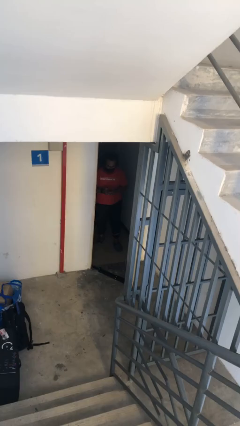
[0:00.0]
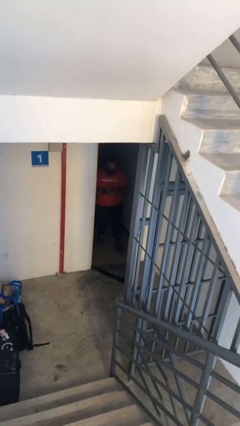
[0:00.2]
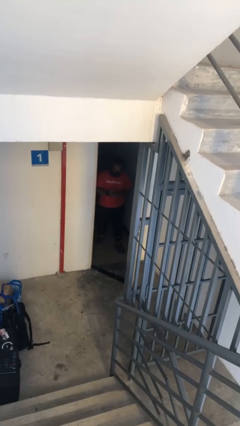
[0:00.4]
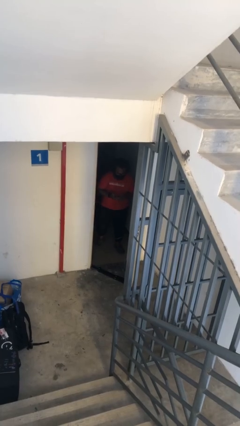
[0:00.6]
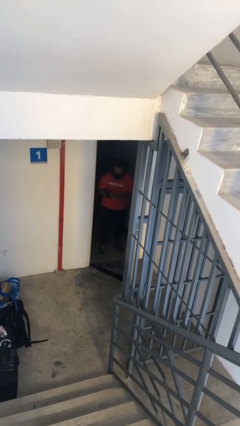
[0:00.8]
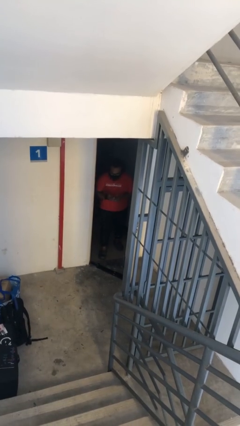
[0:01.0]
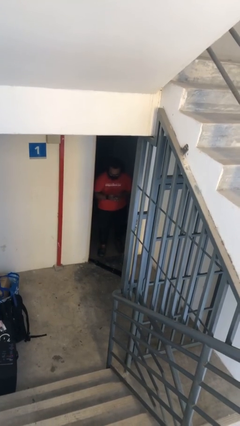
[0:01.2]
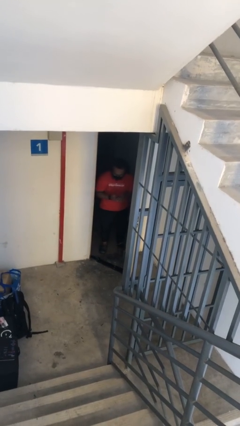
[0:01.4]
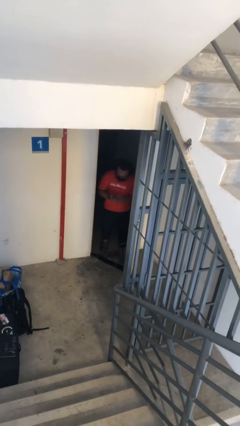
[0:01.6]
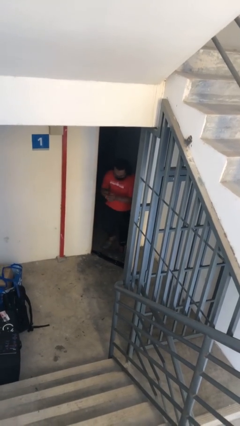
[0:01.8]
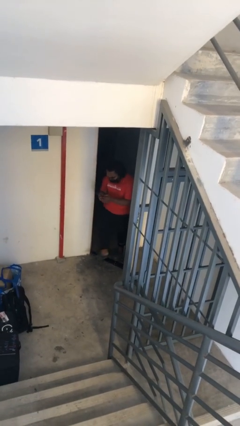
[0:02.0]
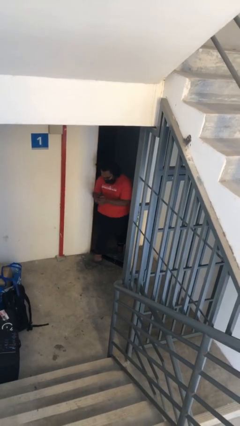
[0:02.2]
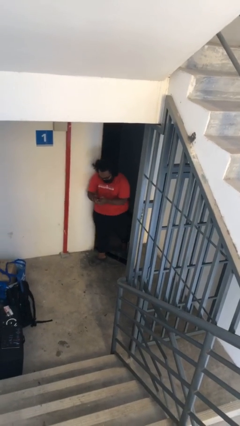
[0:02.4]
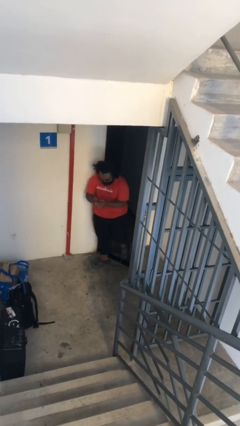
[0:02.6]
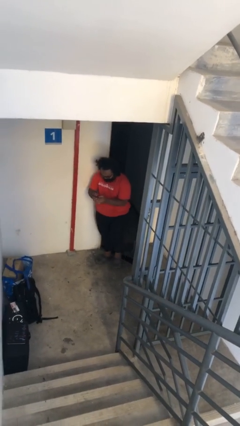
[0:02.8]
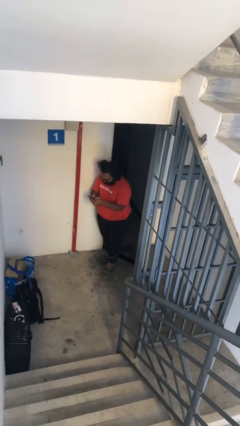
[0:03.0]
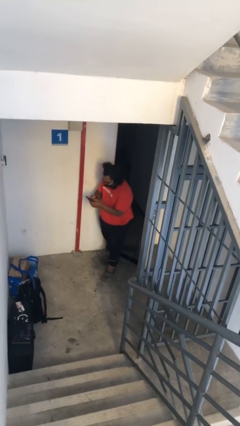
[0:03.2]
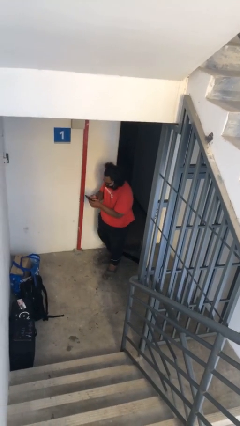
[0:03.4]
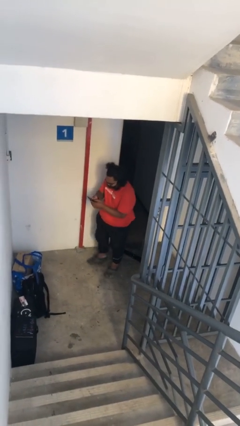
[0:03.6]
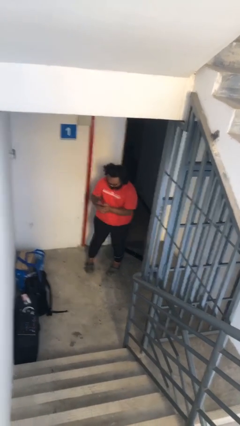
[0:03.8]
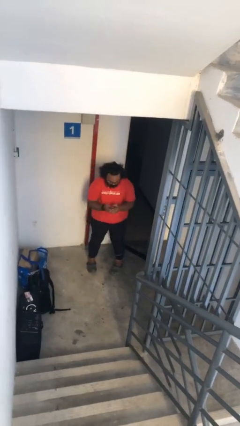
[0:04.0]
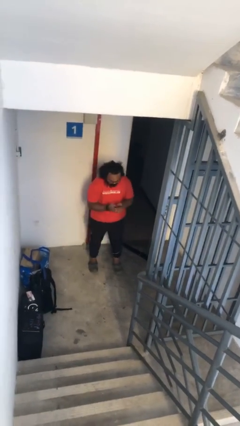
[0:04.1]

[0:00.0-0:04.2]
person enters scene through structure

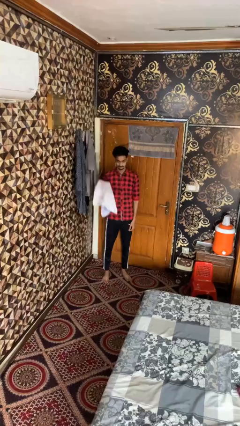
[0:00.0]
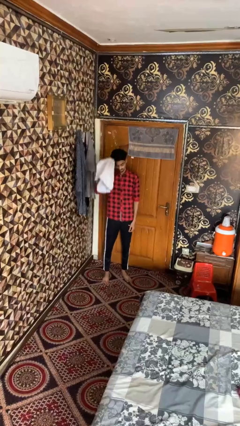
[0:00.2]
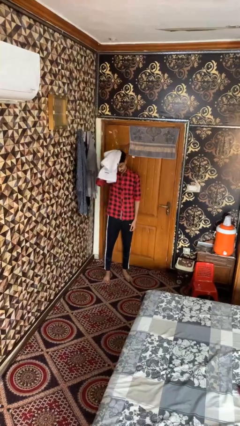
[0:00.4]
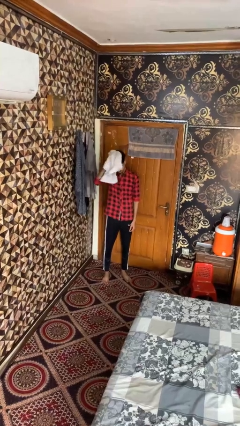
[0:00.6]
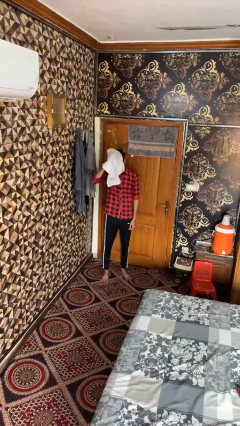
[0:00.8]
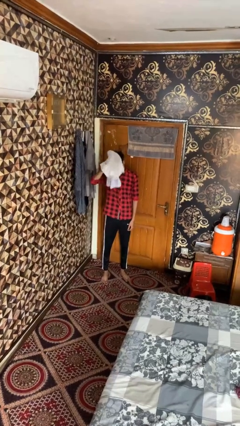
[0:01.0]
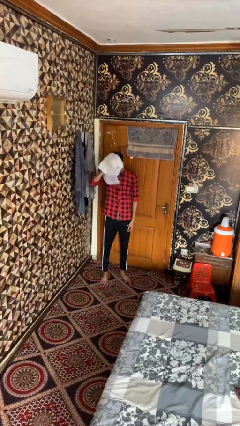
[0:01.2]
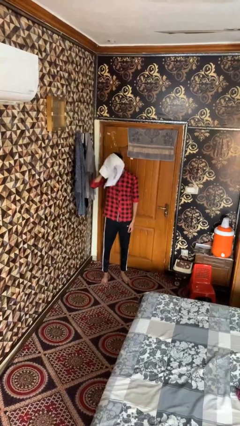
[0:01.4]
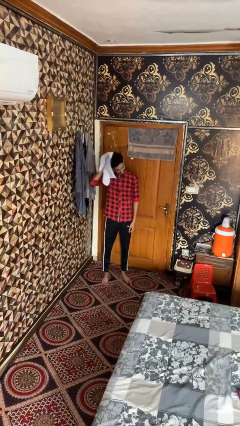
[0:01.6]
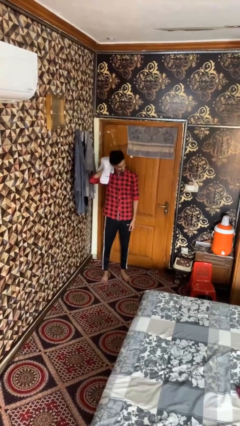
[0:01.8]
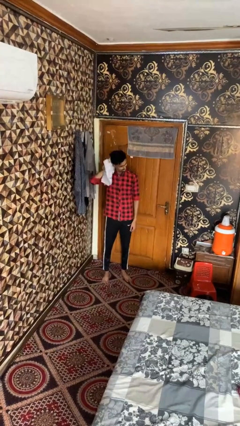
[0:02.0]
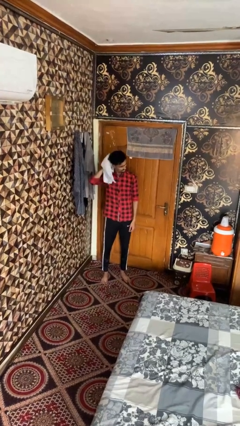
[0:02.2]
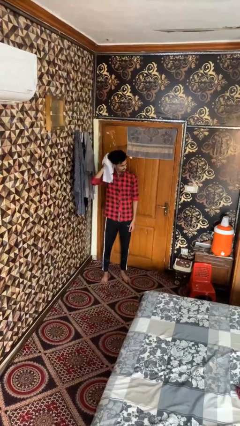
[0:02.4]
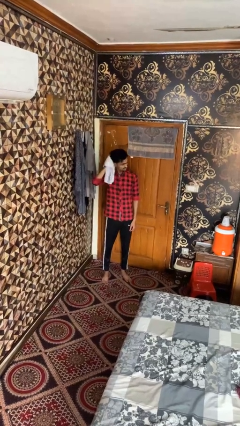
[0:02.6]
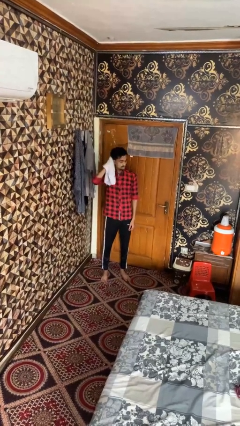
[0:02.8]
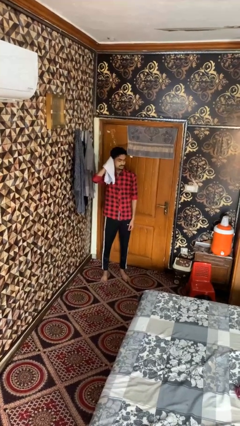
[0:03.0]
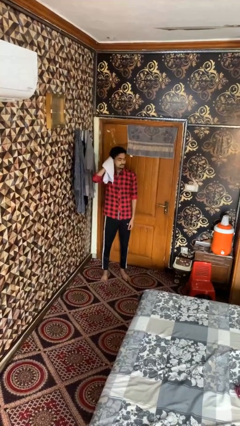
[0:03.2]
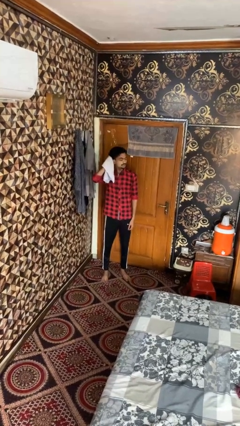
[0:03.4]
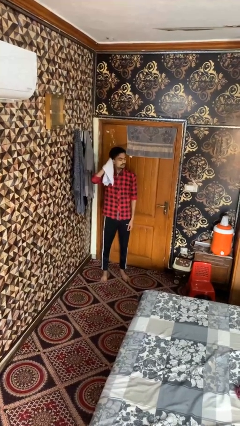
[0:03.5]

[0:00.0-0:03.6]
person dries hair with towel

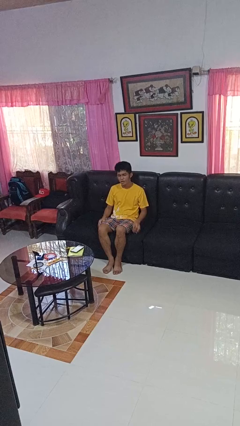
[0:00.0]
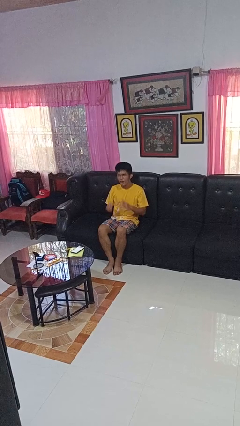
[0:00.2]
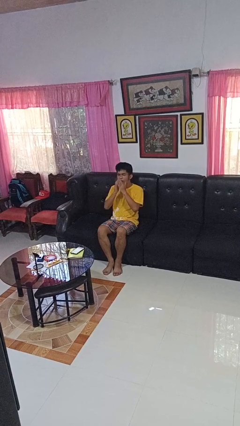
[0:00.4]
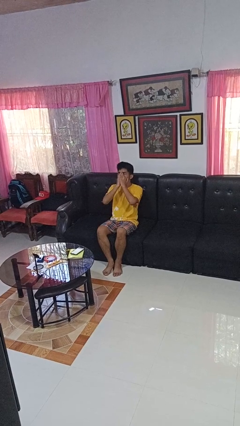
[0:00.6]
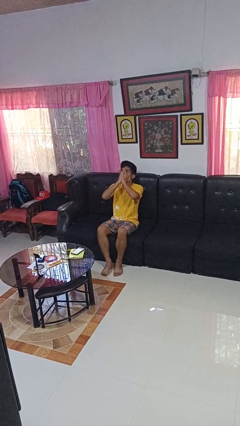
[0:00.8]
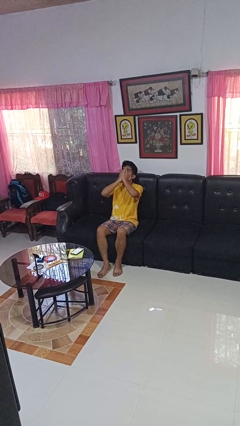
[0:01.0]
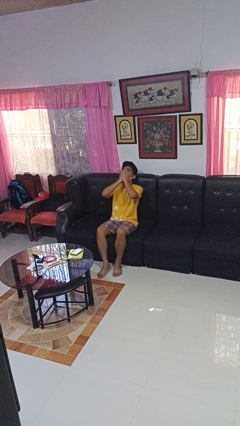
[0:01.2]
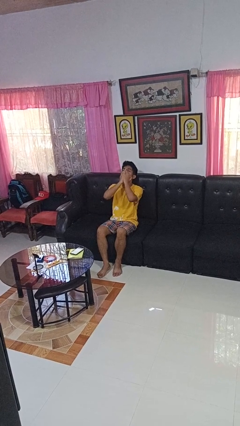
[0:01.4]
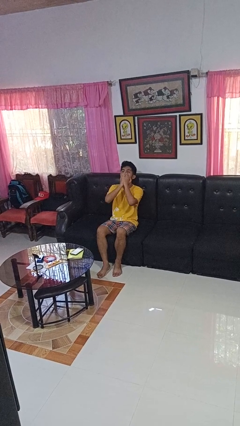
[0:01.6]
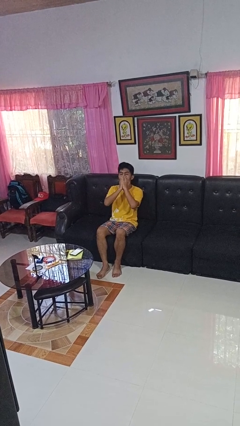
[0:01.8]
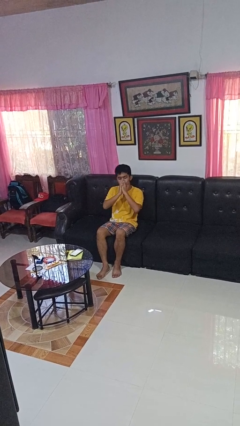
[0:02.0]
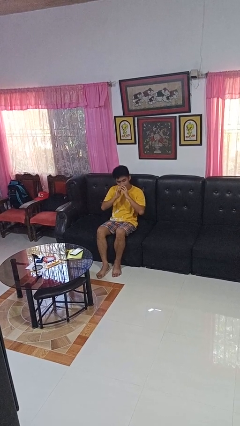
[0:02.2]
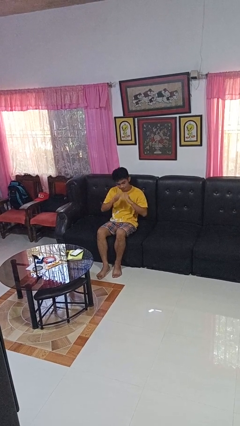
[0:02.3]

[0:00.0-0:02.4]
person yawns

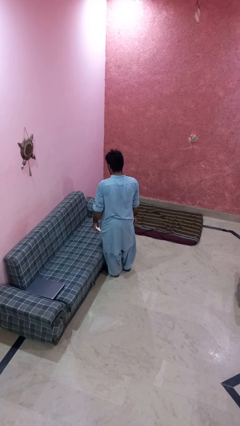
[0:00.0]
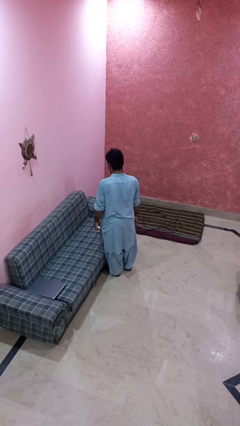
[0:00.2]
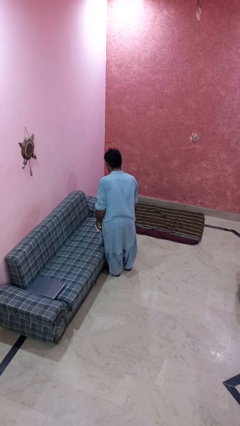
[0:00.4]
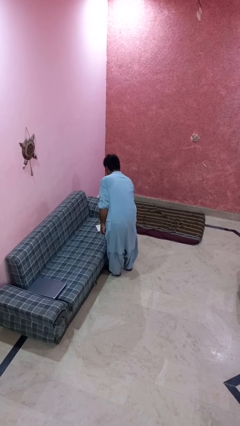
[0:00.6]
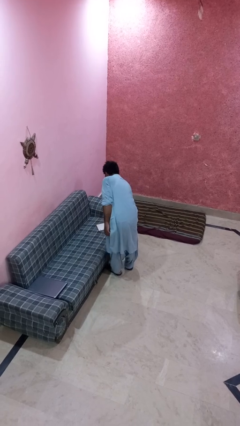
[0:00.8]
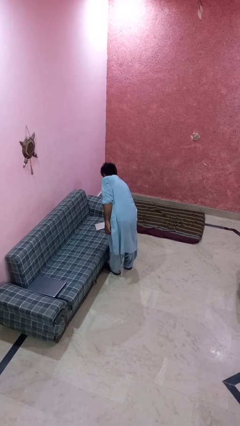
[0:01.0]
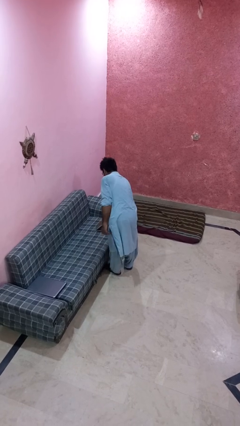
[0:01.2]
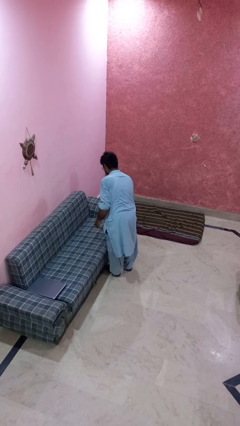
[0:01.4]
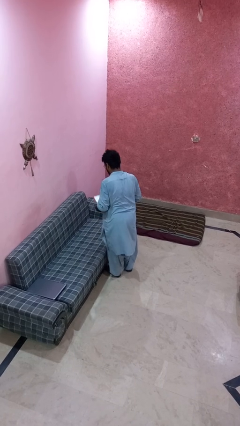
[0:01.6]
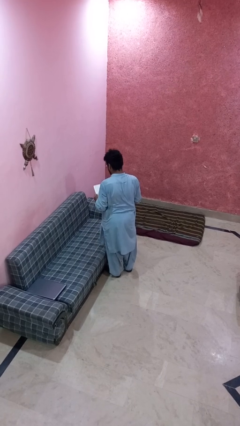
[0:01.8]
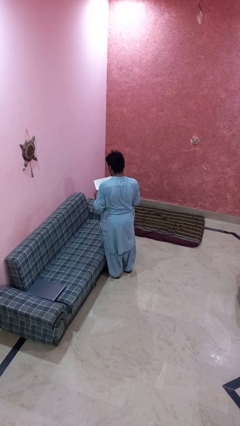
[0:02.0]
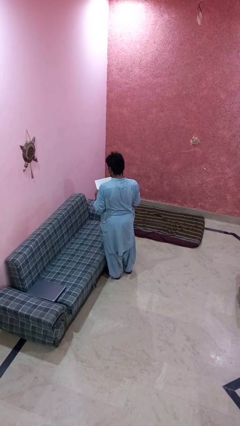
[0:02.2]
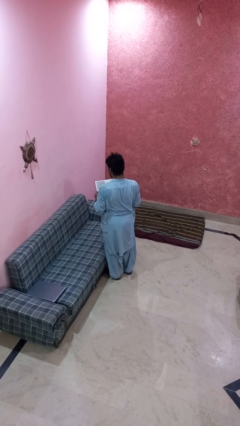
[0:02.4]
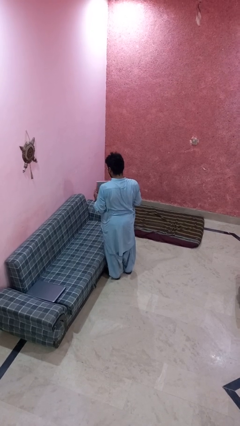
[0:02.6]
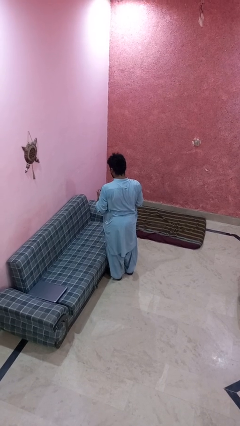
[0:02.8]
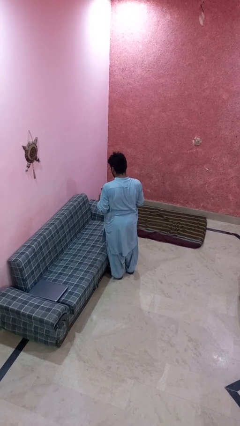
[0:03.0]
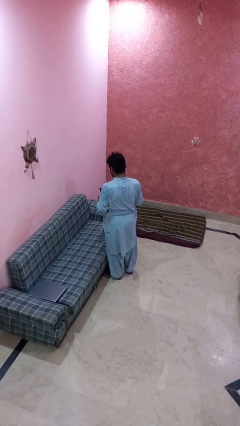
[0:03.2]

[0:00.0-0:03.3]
person picks up object from couch

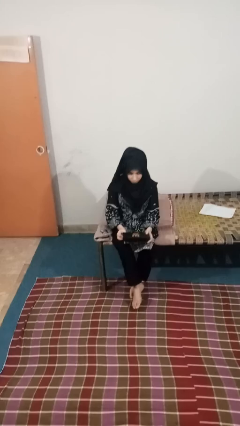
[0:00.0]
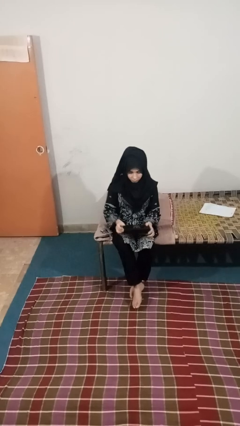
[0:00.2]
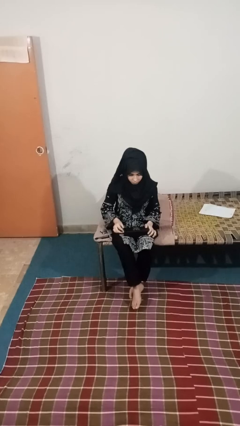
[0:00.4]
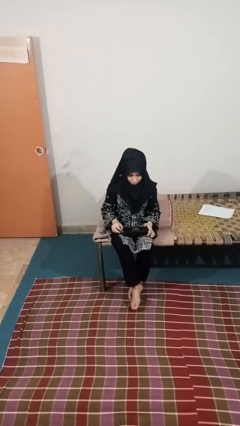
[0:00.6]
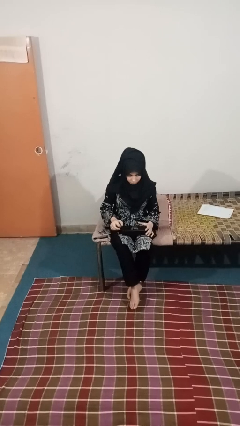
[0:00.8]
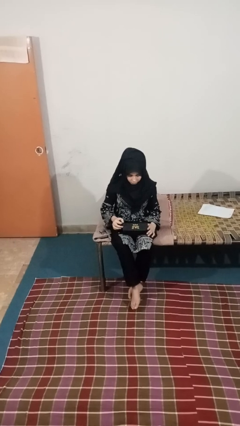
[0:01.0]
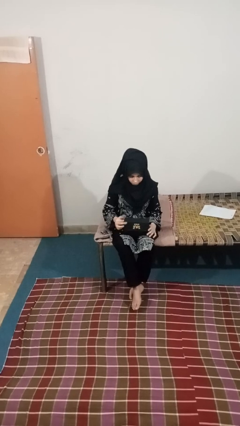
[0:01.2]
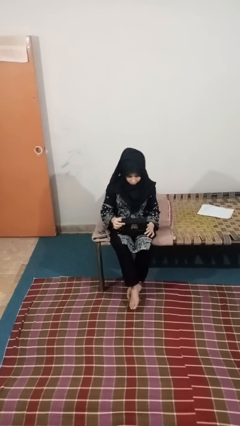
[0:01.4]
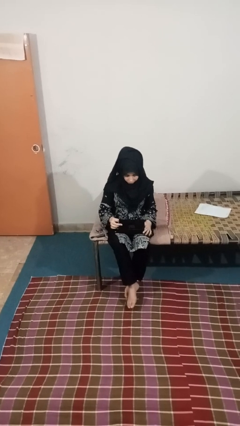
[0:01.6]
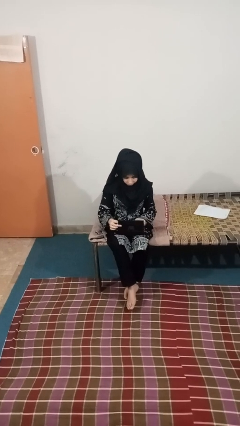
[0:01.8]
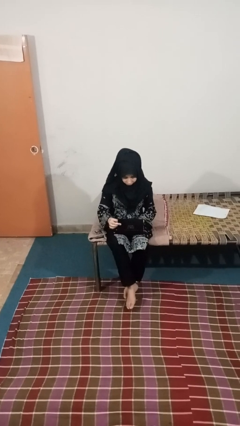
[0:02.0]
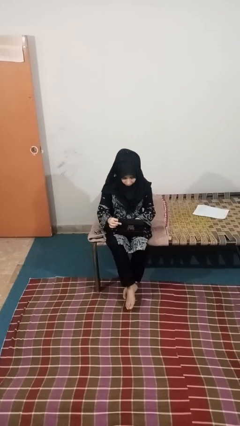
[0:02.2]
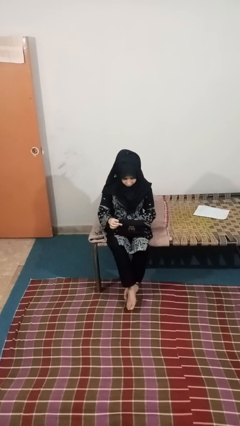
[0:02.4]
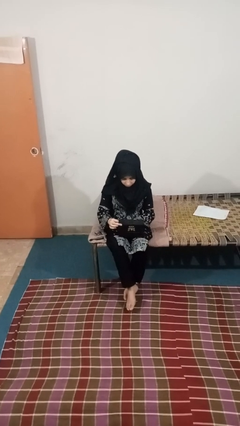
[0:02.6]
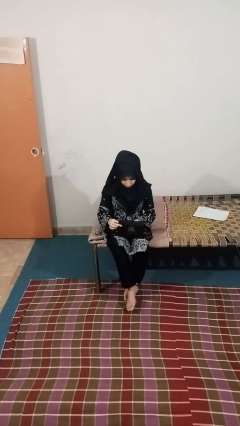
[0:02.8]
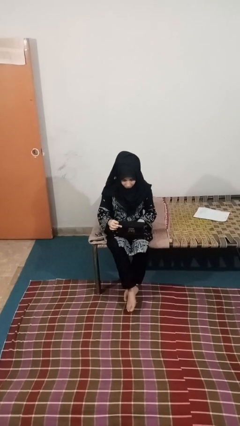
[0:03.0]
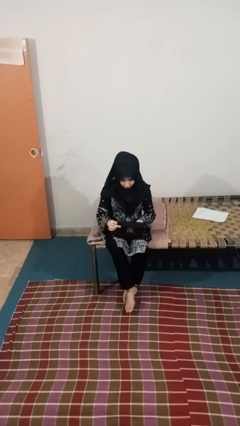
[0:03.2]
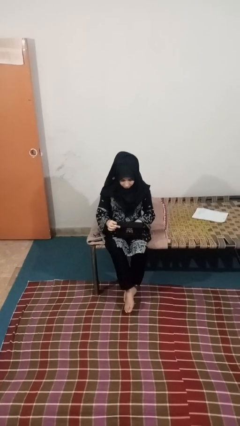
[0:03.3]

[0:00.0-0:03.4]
person opens jewelry box

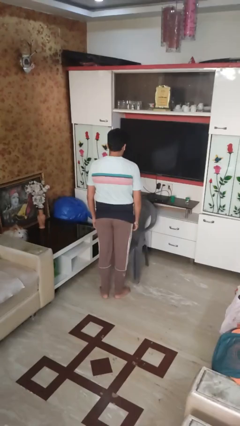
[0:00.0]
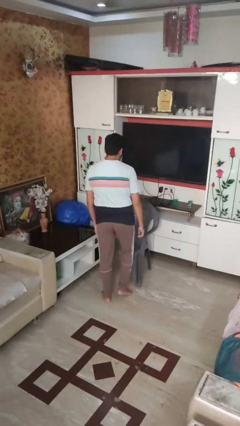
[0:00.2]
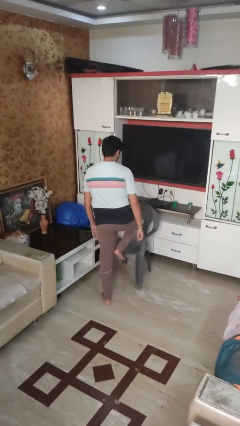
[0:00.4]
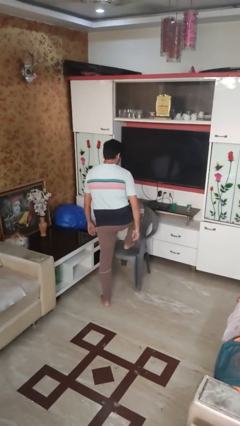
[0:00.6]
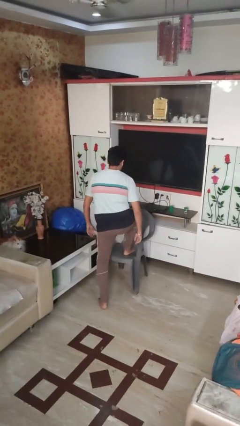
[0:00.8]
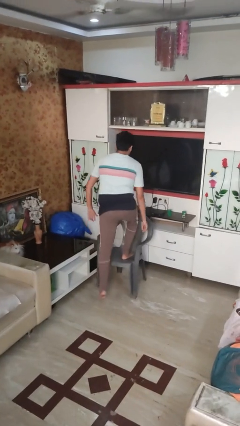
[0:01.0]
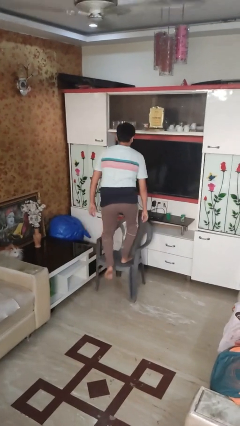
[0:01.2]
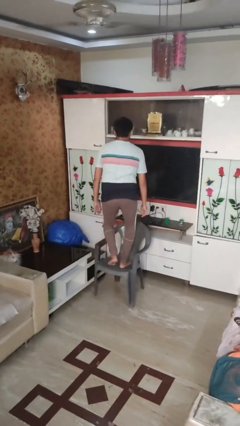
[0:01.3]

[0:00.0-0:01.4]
person climbs on chair
